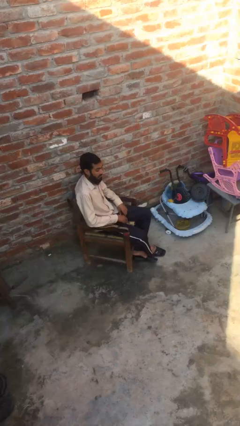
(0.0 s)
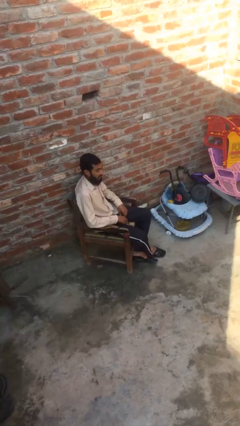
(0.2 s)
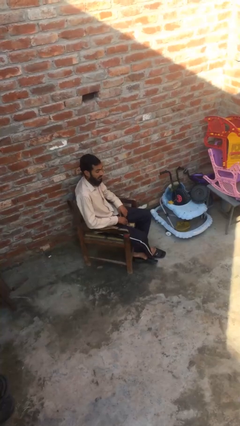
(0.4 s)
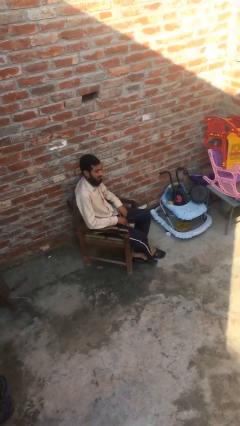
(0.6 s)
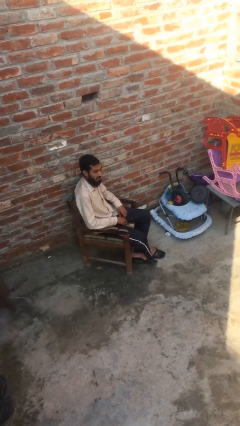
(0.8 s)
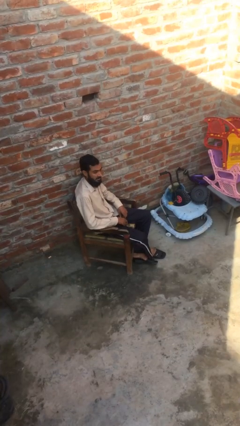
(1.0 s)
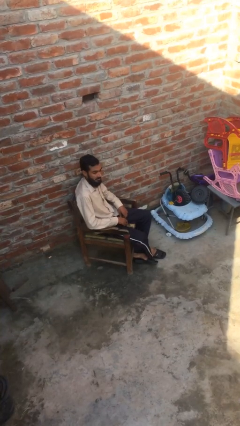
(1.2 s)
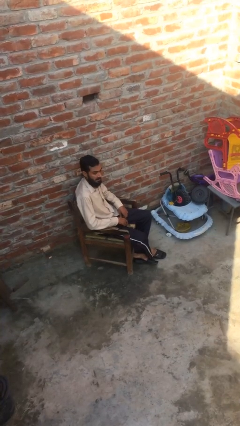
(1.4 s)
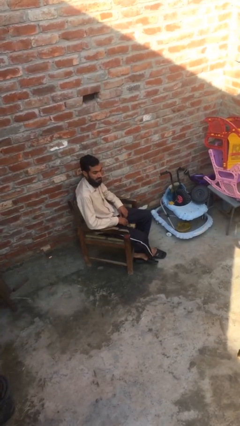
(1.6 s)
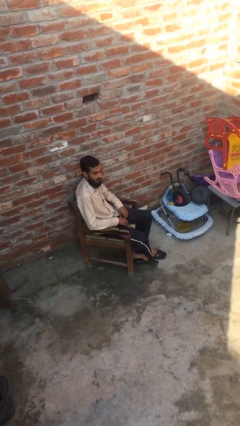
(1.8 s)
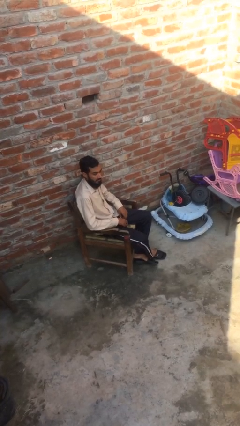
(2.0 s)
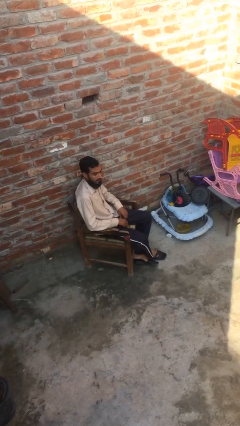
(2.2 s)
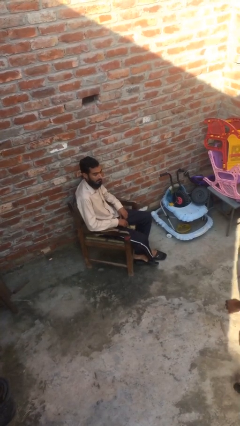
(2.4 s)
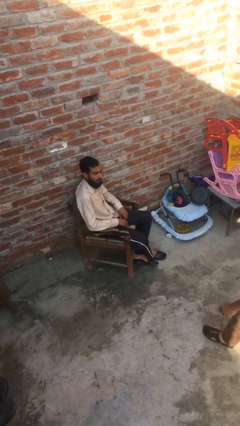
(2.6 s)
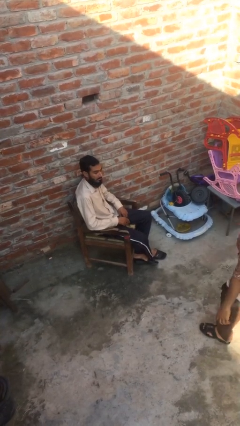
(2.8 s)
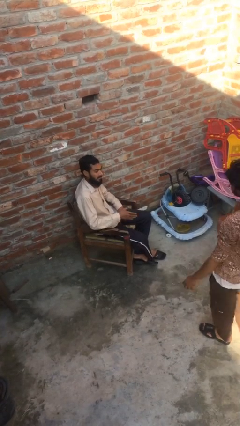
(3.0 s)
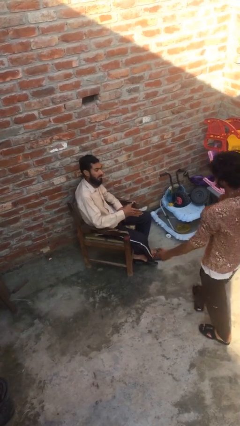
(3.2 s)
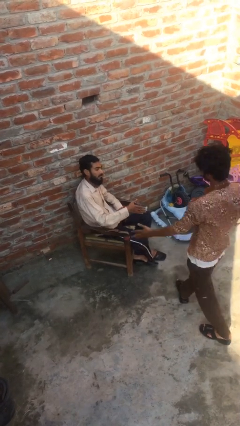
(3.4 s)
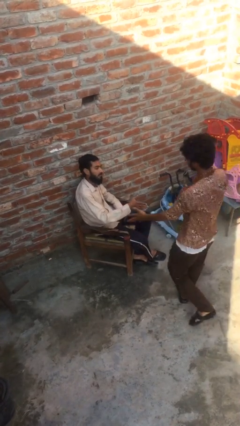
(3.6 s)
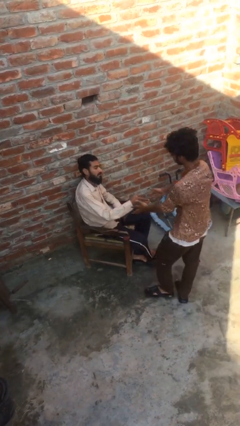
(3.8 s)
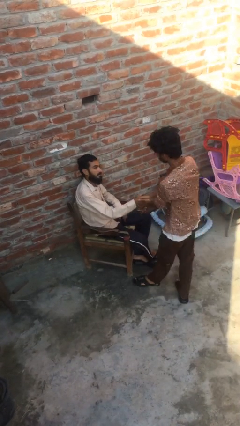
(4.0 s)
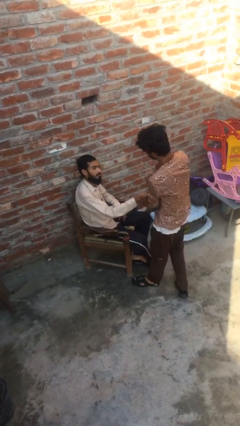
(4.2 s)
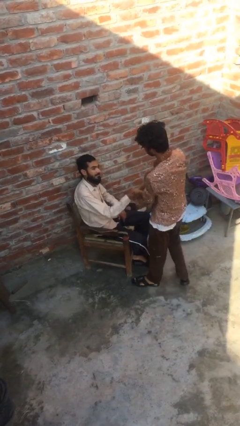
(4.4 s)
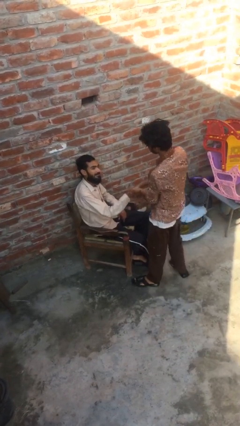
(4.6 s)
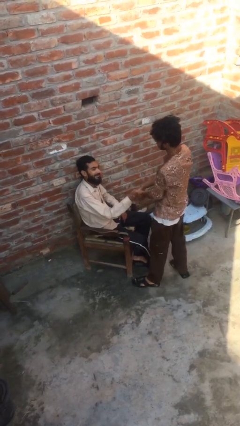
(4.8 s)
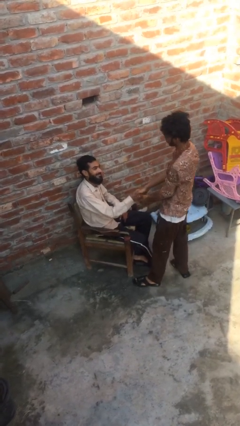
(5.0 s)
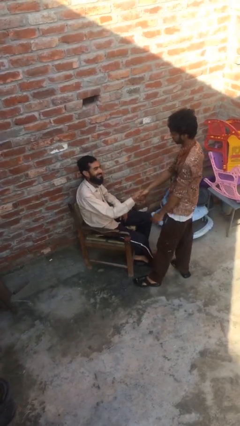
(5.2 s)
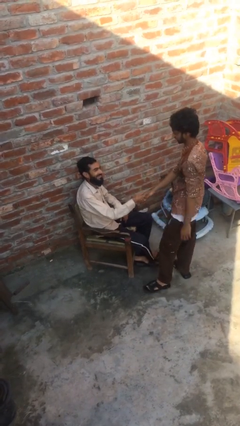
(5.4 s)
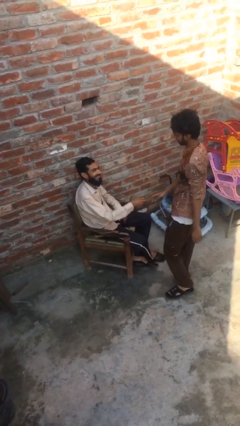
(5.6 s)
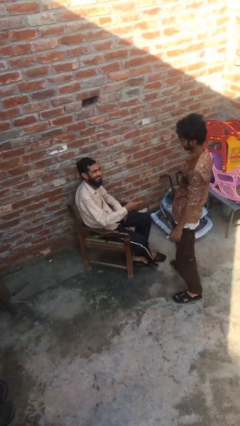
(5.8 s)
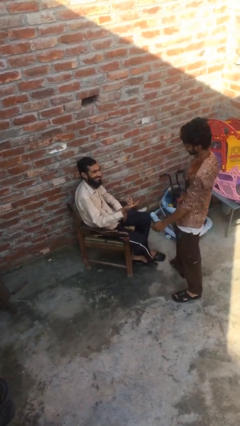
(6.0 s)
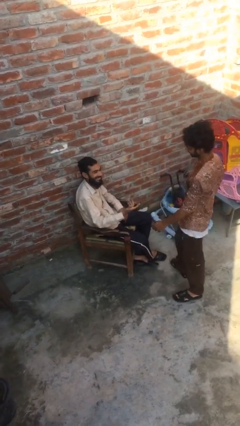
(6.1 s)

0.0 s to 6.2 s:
person shakes hand

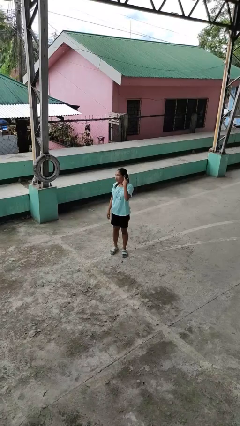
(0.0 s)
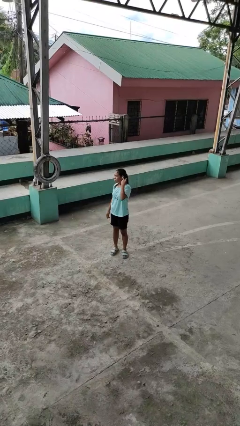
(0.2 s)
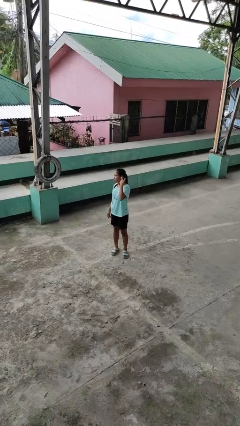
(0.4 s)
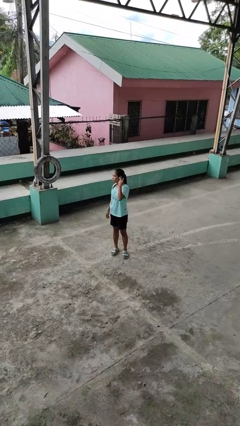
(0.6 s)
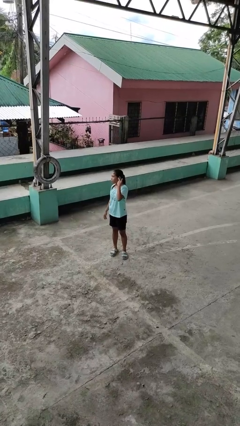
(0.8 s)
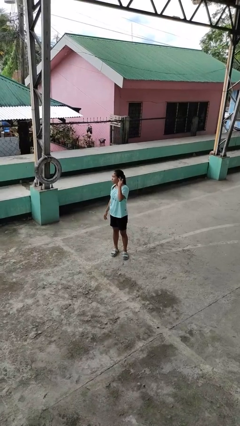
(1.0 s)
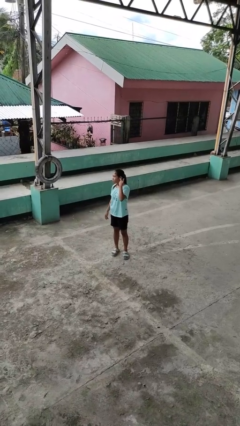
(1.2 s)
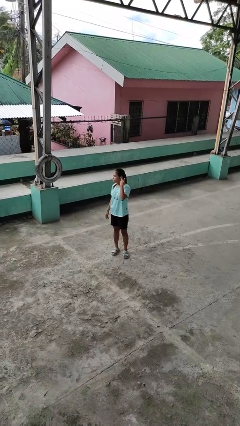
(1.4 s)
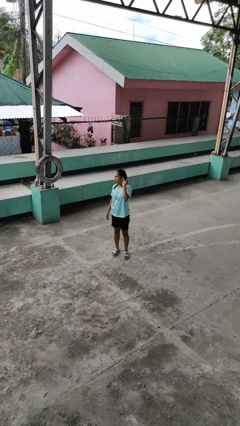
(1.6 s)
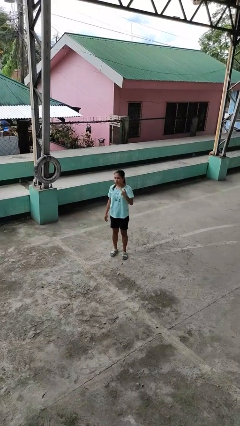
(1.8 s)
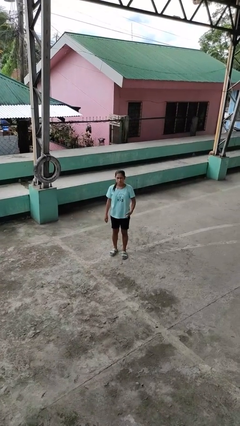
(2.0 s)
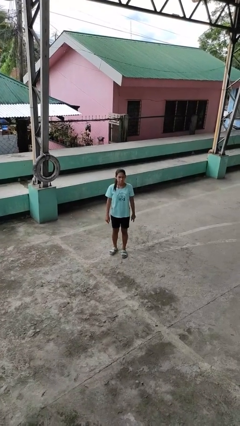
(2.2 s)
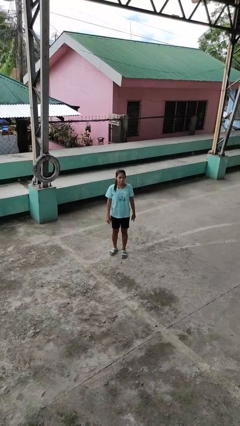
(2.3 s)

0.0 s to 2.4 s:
person gestures listen closely

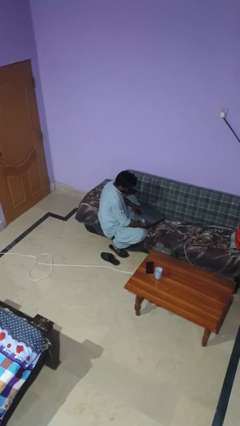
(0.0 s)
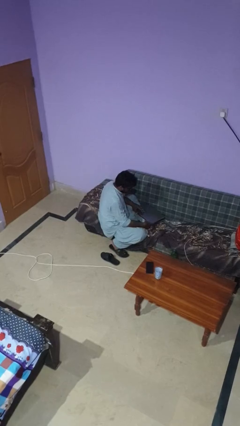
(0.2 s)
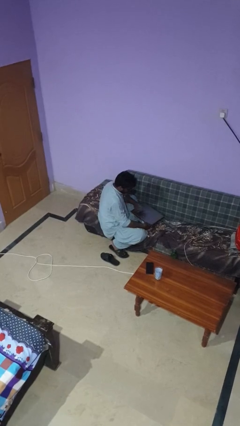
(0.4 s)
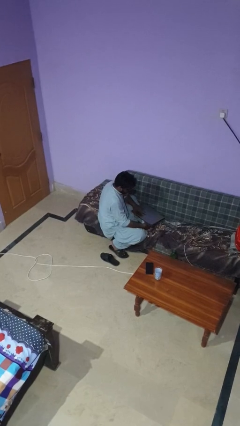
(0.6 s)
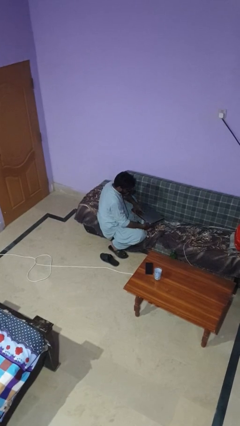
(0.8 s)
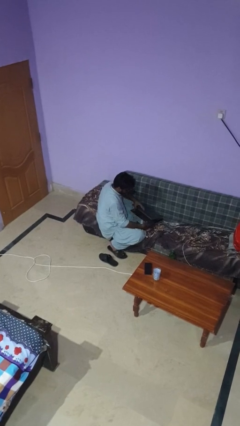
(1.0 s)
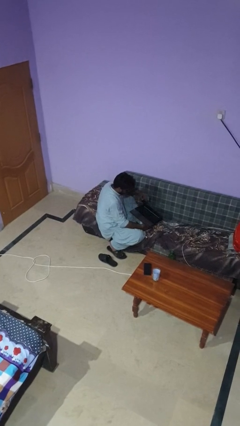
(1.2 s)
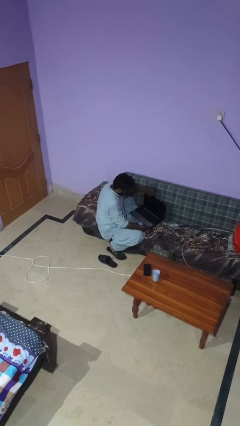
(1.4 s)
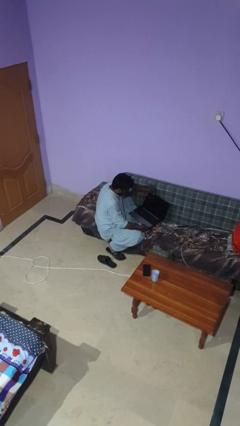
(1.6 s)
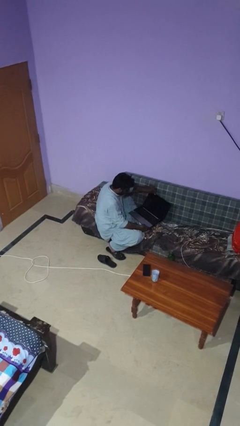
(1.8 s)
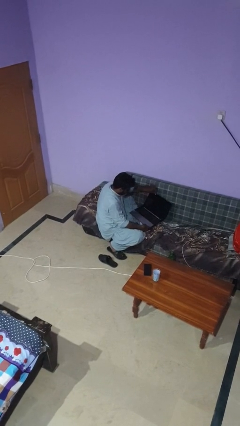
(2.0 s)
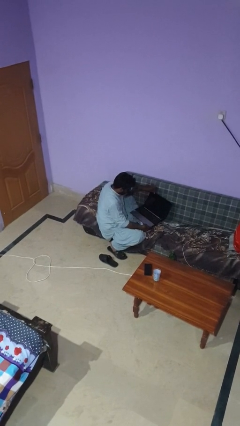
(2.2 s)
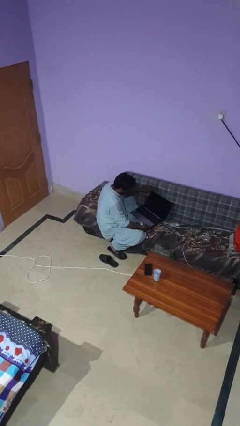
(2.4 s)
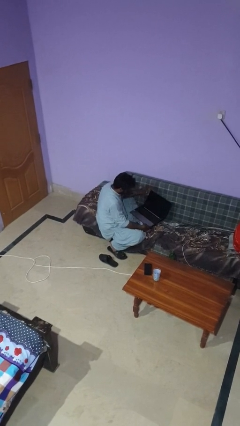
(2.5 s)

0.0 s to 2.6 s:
person opens laptop

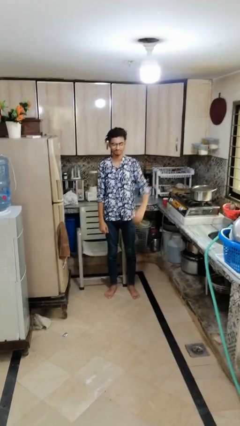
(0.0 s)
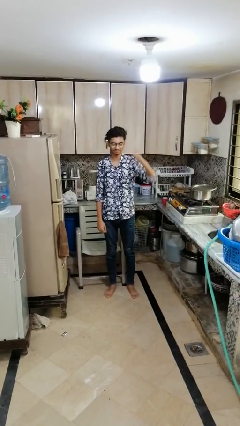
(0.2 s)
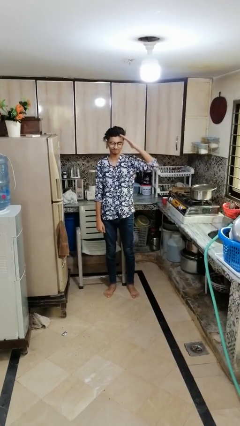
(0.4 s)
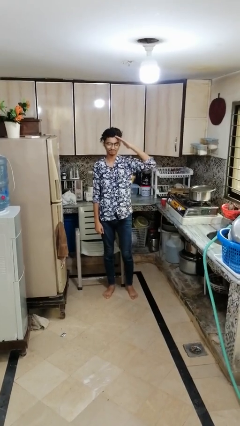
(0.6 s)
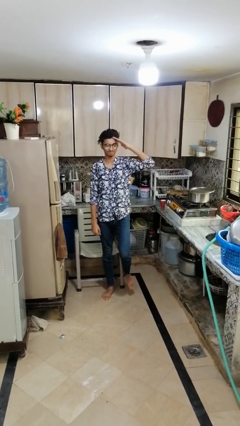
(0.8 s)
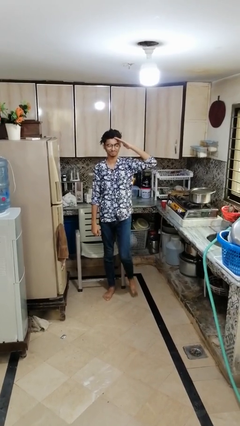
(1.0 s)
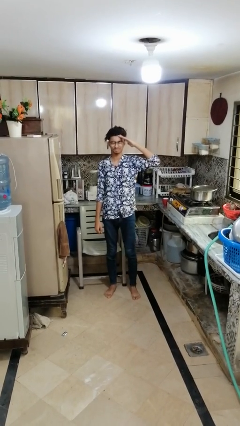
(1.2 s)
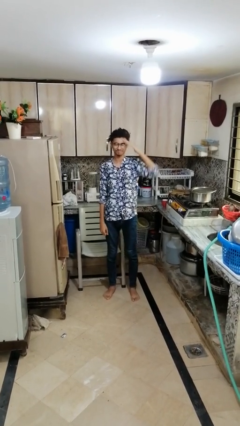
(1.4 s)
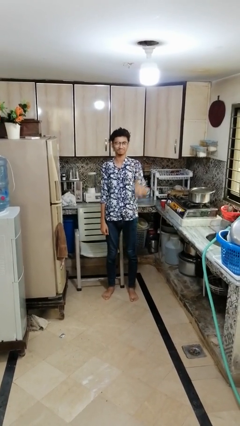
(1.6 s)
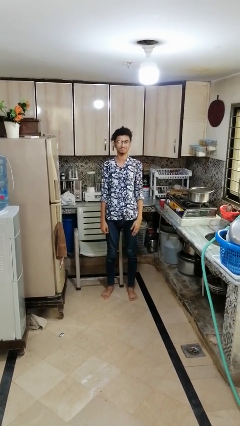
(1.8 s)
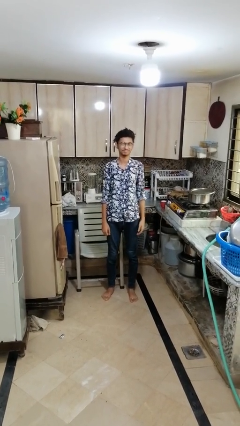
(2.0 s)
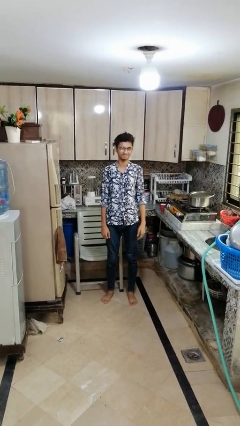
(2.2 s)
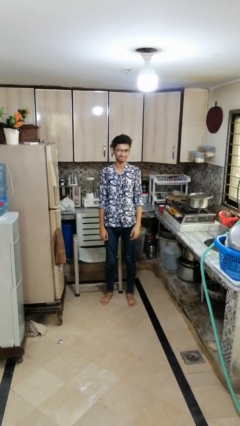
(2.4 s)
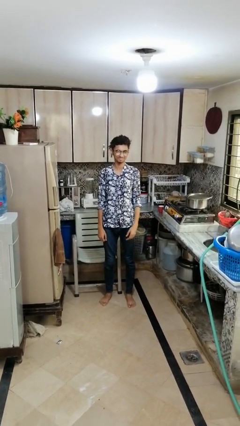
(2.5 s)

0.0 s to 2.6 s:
person salutes

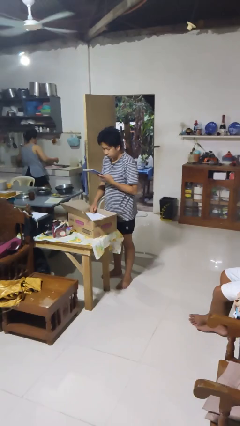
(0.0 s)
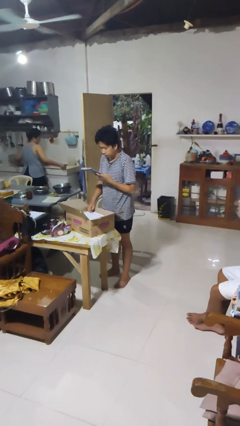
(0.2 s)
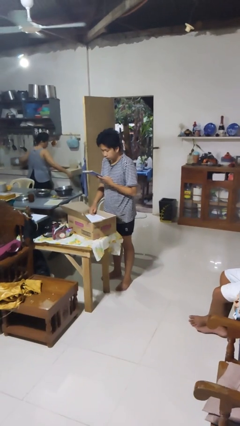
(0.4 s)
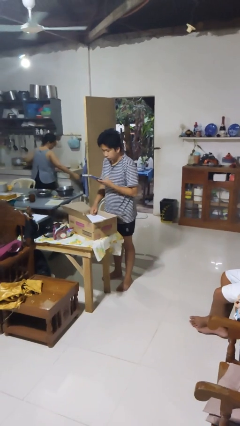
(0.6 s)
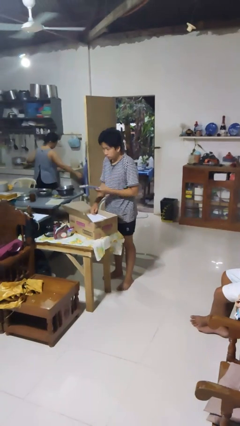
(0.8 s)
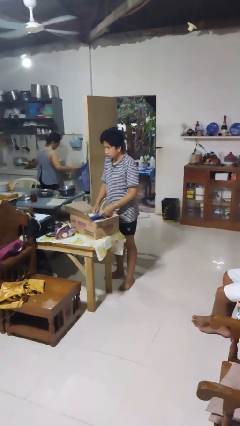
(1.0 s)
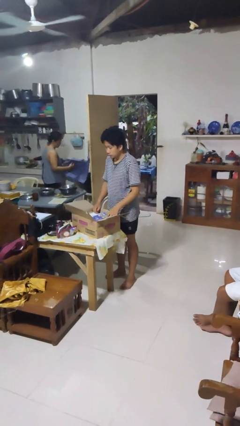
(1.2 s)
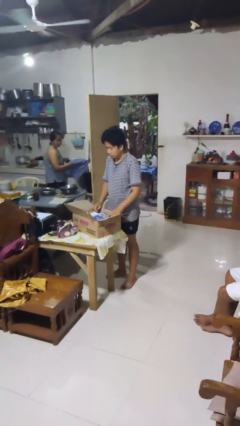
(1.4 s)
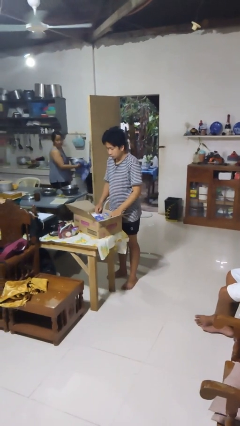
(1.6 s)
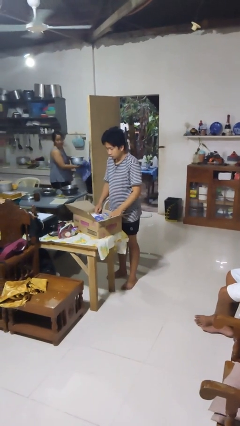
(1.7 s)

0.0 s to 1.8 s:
person puts object into box

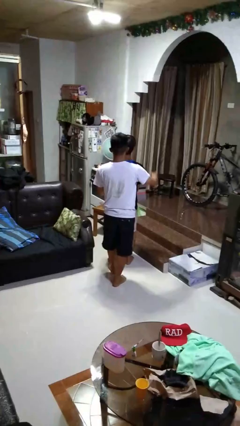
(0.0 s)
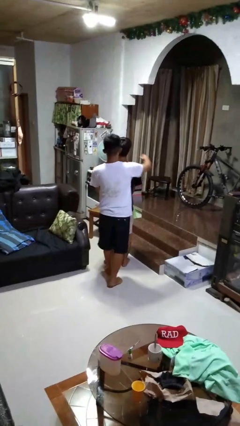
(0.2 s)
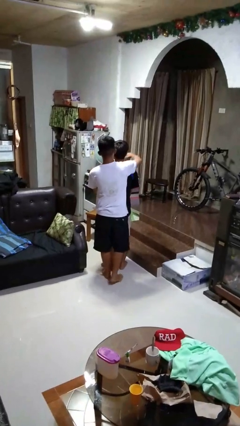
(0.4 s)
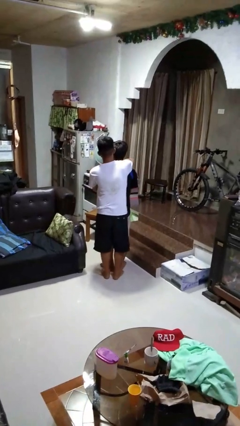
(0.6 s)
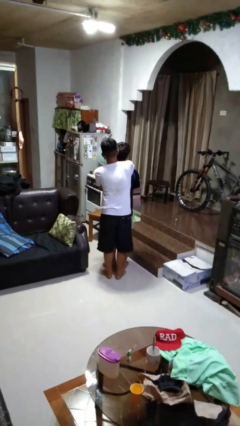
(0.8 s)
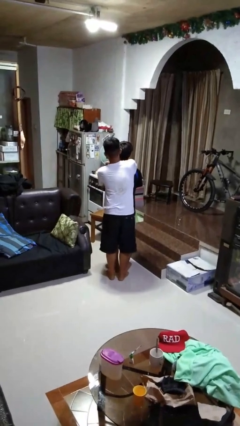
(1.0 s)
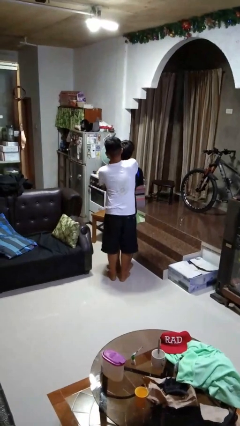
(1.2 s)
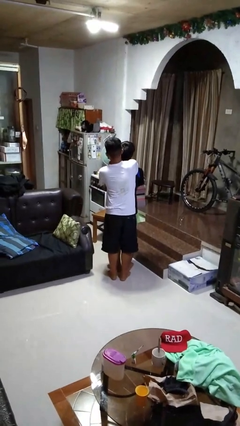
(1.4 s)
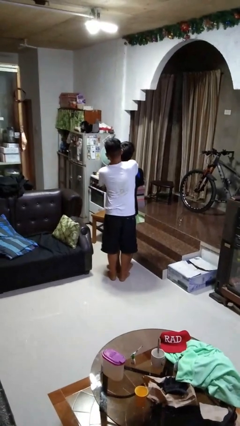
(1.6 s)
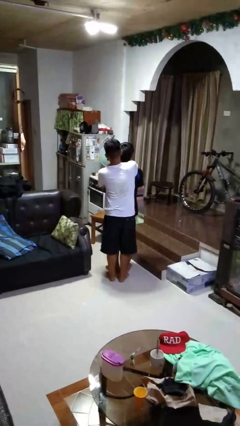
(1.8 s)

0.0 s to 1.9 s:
person hugs person from behind
